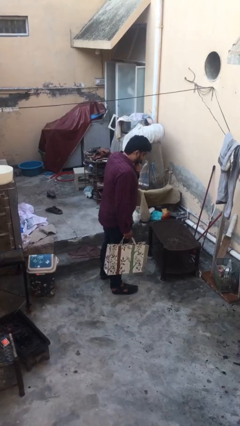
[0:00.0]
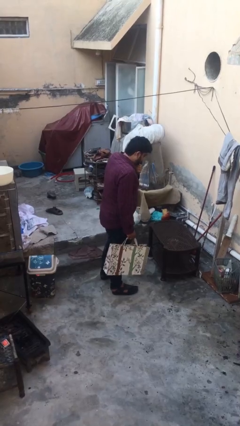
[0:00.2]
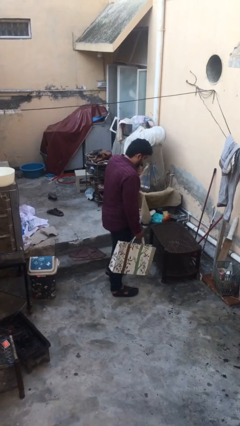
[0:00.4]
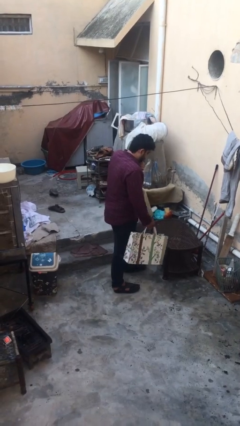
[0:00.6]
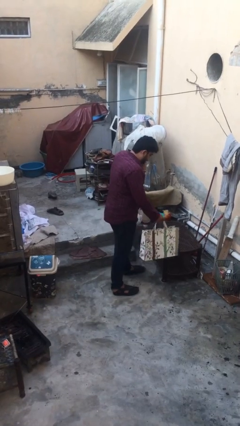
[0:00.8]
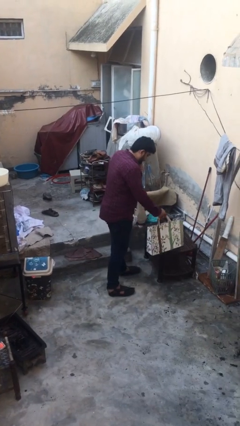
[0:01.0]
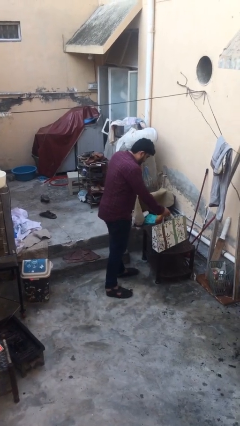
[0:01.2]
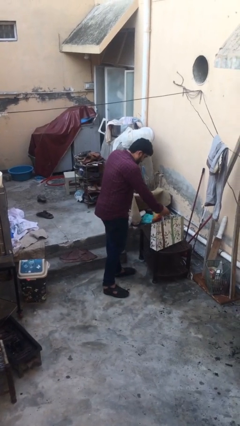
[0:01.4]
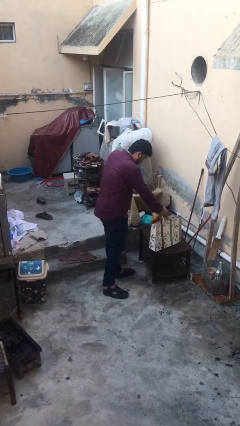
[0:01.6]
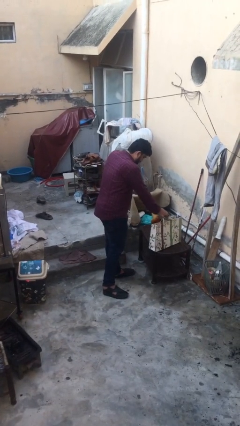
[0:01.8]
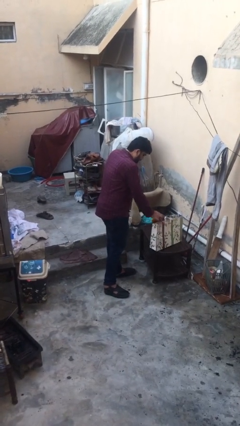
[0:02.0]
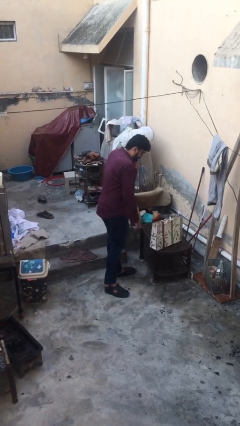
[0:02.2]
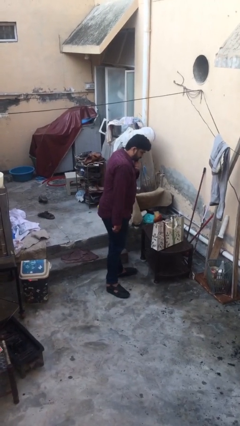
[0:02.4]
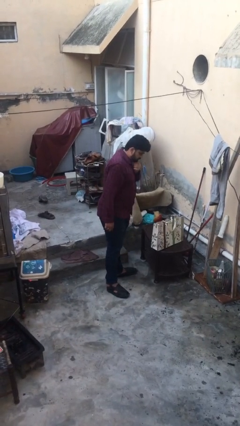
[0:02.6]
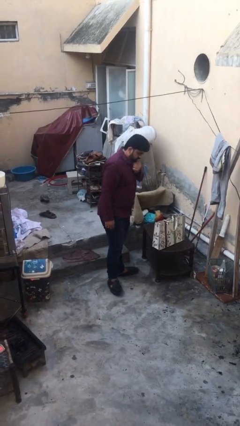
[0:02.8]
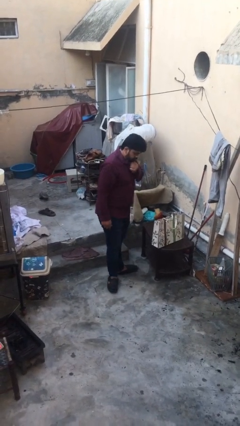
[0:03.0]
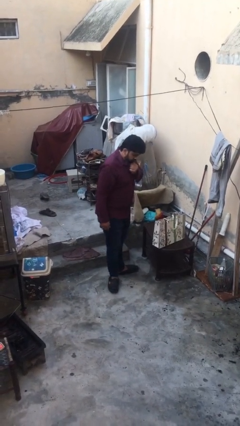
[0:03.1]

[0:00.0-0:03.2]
person puts down object on table

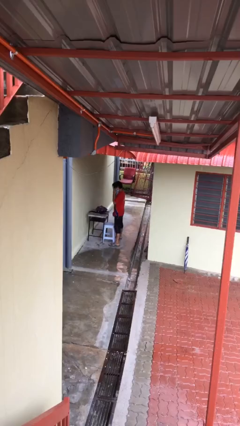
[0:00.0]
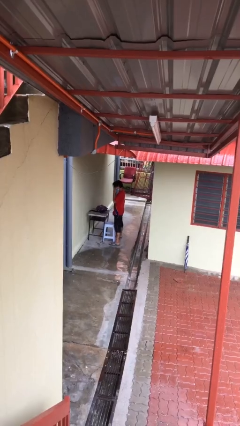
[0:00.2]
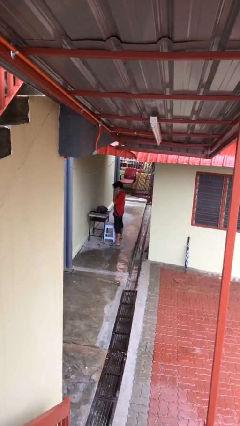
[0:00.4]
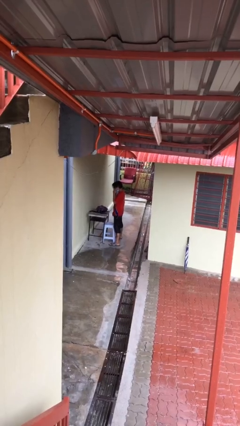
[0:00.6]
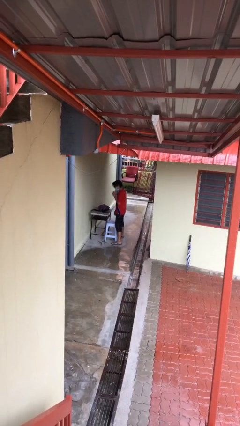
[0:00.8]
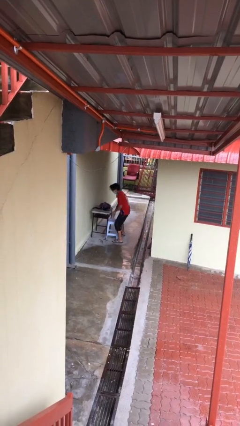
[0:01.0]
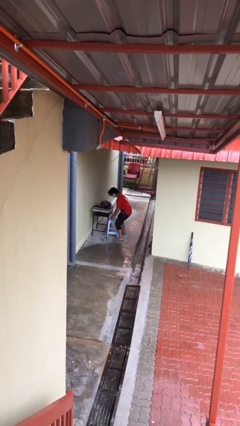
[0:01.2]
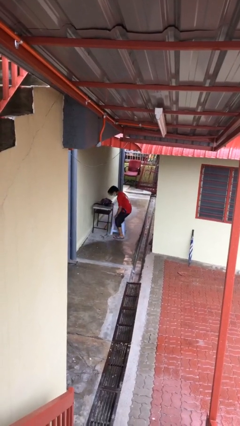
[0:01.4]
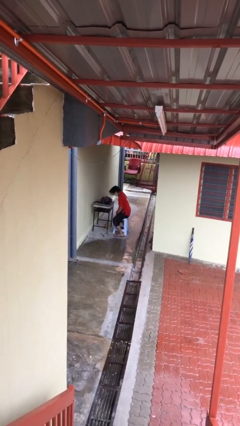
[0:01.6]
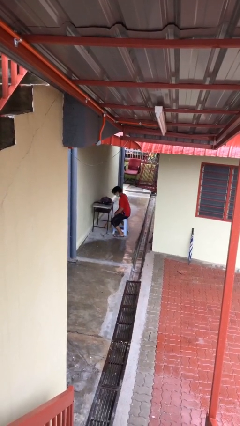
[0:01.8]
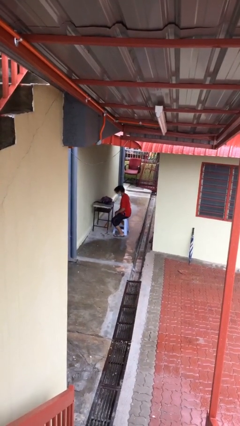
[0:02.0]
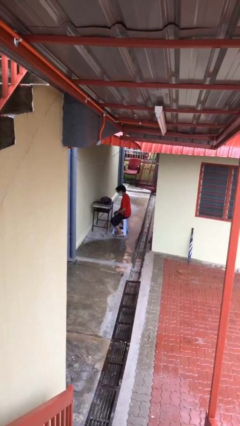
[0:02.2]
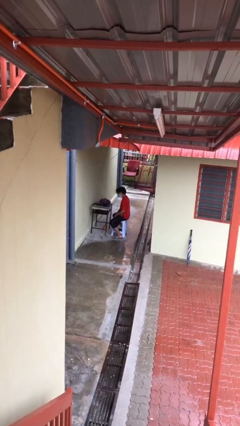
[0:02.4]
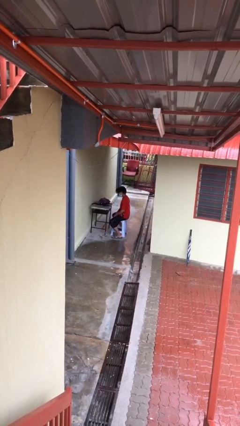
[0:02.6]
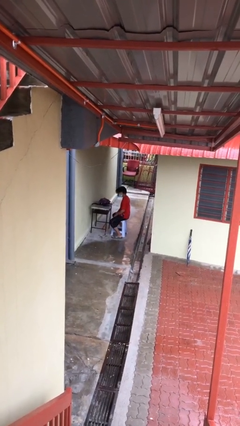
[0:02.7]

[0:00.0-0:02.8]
person sits down

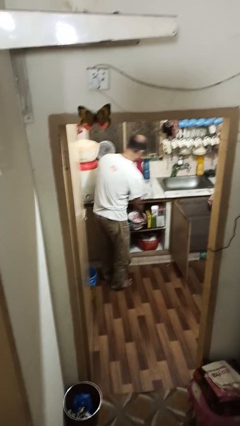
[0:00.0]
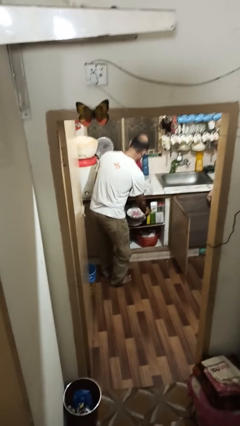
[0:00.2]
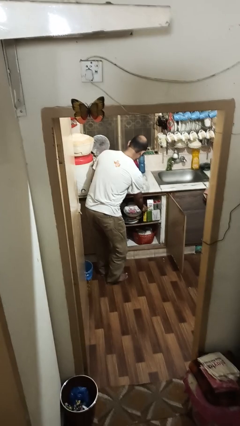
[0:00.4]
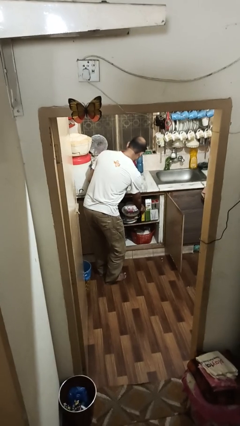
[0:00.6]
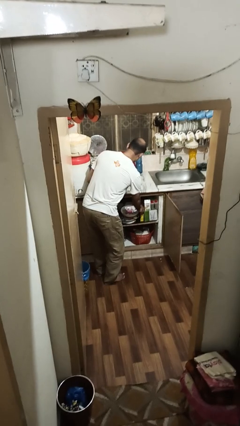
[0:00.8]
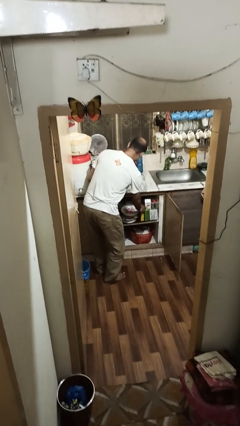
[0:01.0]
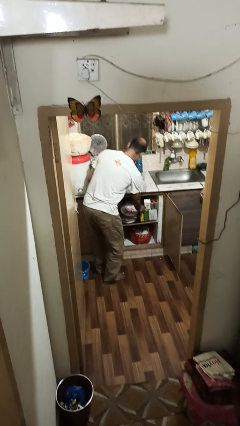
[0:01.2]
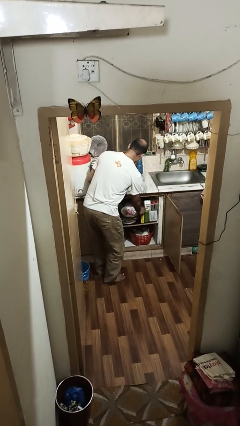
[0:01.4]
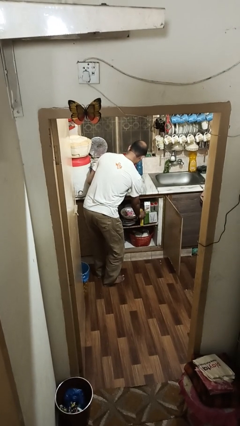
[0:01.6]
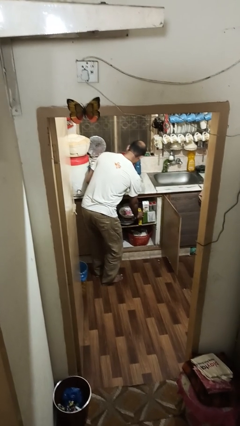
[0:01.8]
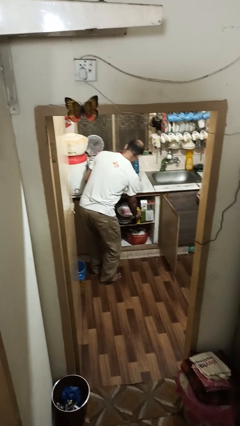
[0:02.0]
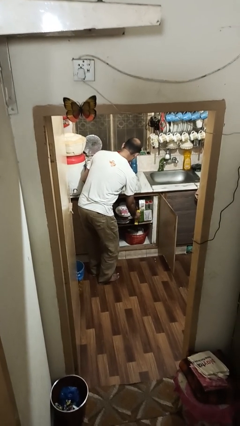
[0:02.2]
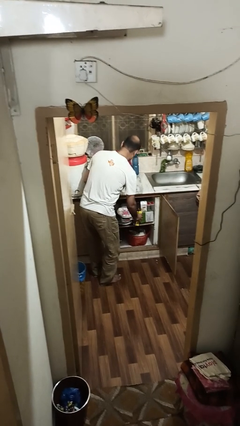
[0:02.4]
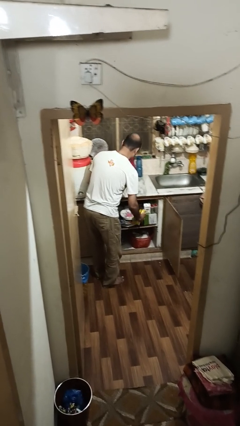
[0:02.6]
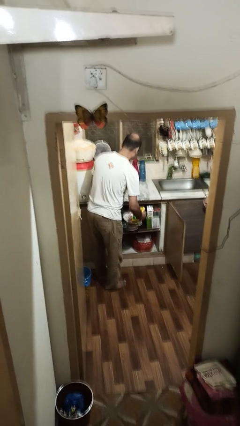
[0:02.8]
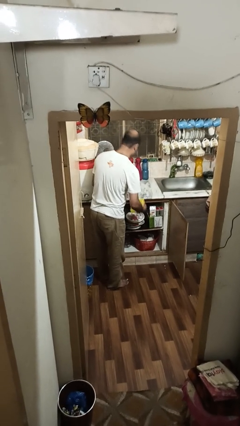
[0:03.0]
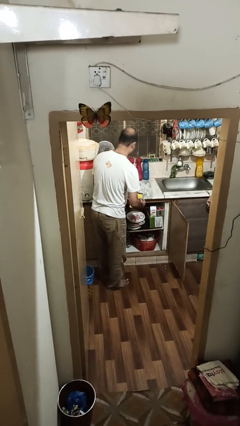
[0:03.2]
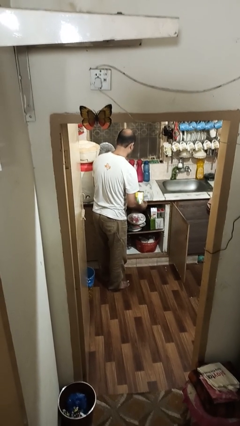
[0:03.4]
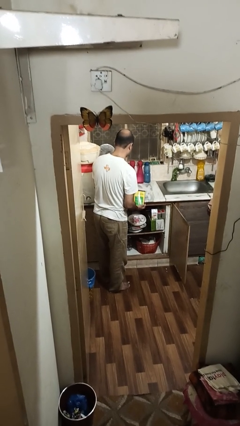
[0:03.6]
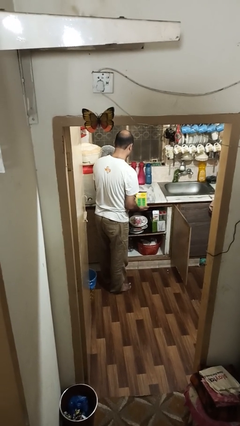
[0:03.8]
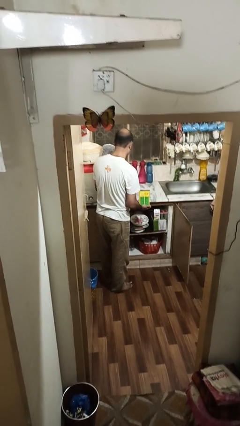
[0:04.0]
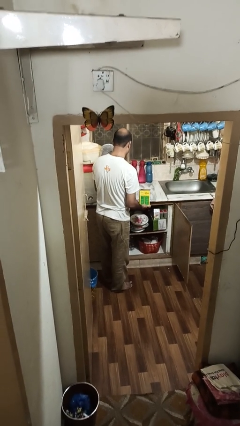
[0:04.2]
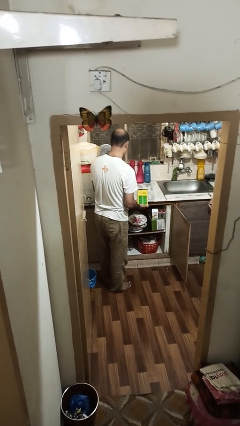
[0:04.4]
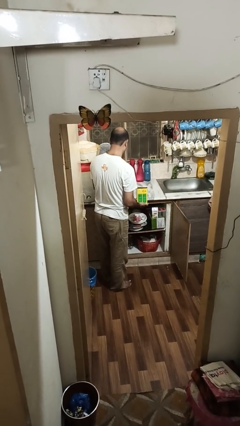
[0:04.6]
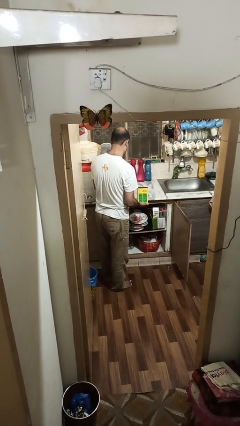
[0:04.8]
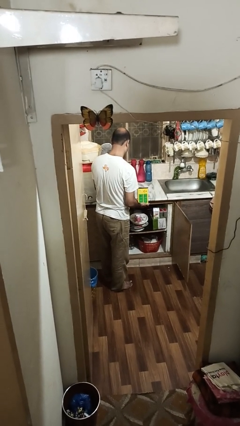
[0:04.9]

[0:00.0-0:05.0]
person takes object from cabinet

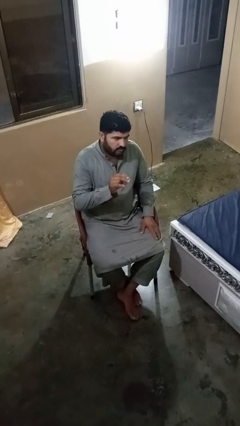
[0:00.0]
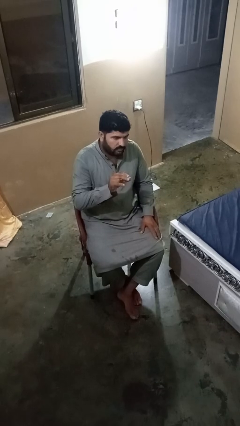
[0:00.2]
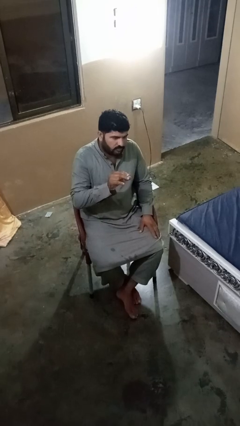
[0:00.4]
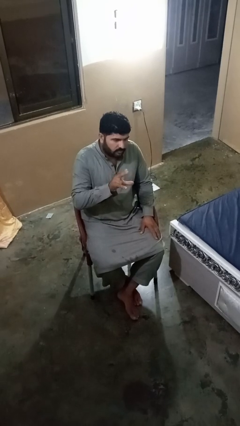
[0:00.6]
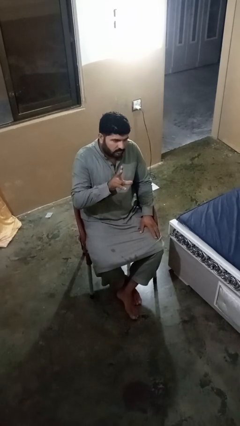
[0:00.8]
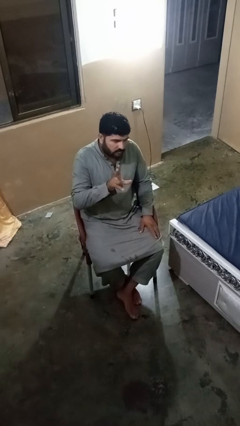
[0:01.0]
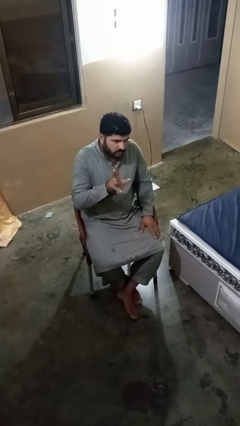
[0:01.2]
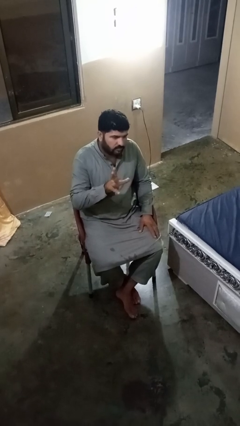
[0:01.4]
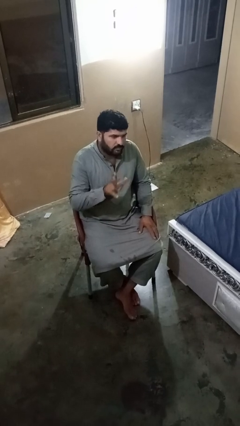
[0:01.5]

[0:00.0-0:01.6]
person gestures zoom out

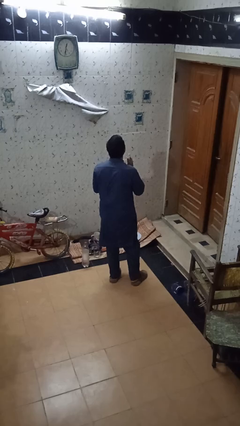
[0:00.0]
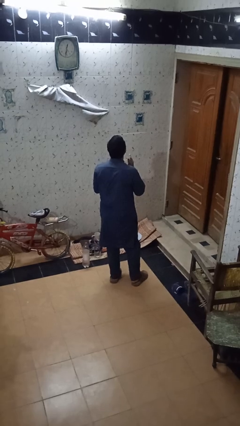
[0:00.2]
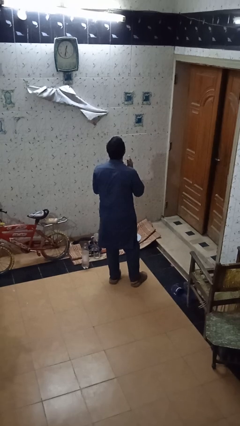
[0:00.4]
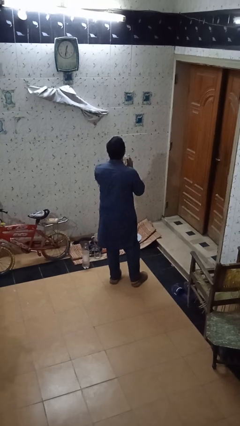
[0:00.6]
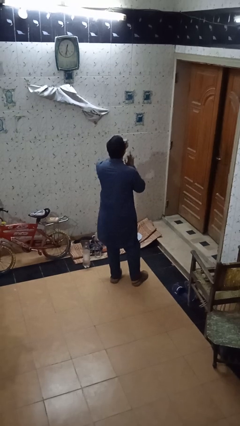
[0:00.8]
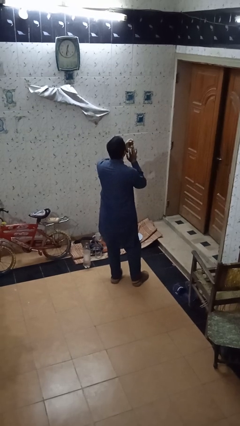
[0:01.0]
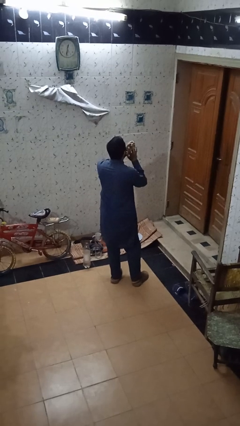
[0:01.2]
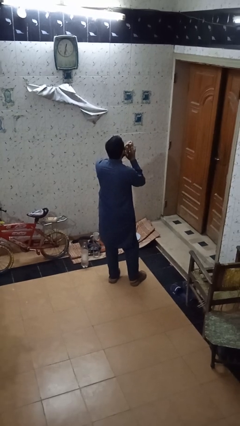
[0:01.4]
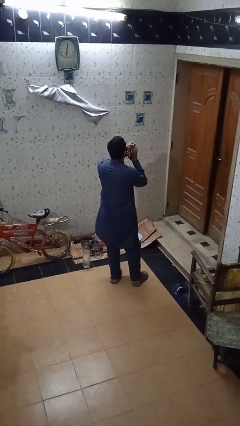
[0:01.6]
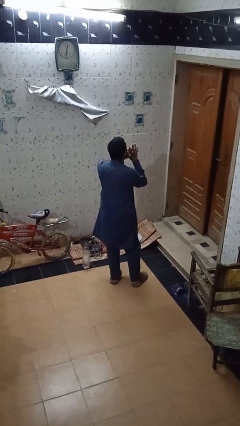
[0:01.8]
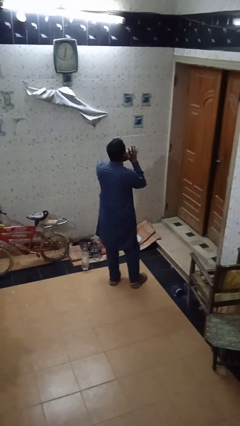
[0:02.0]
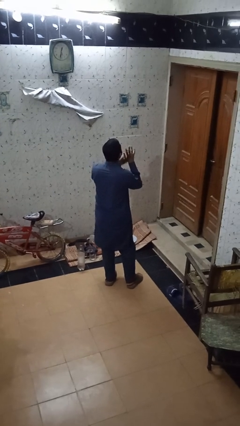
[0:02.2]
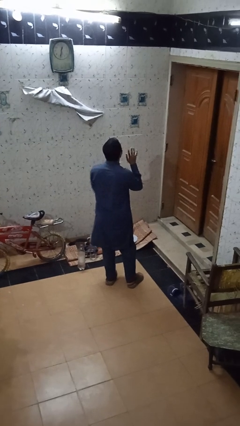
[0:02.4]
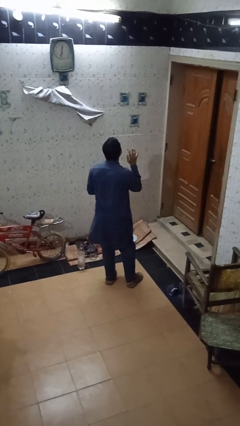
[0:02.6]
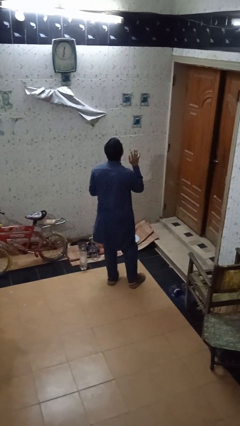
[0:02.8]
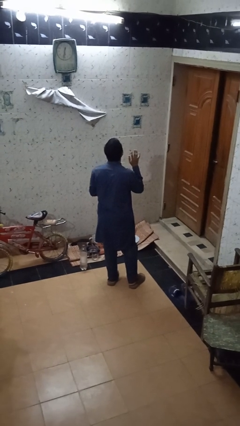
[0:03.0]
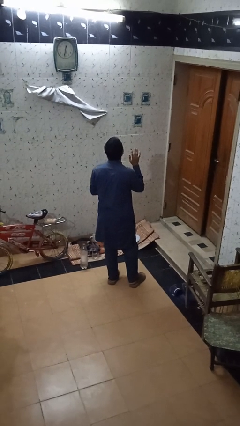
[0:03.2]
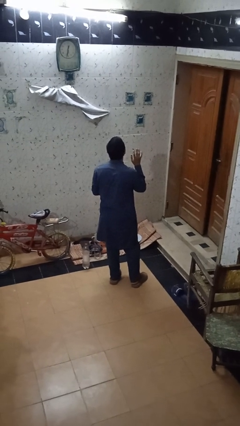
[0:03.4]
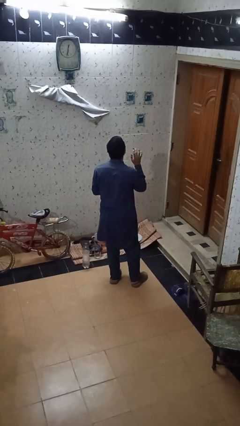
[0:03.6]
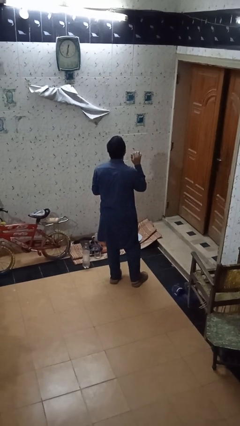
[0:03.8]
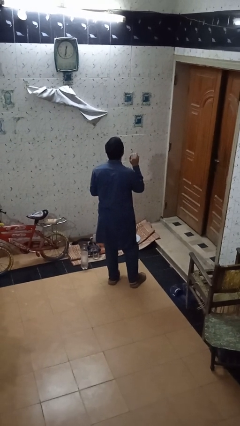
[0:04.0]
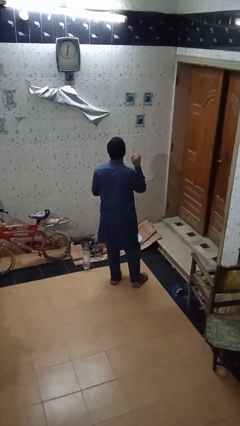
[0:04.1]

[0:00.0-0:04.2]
person puts on ring

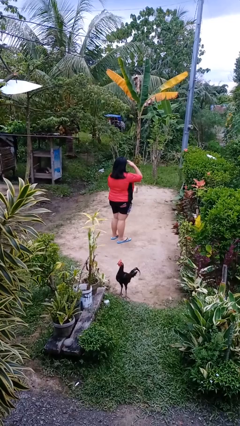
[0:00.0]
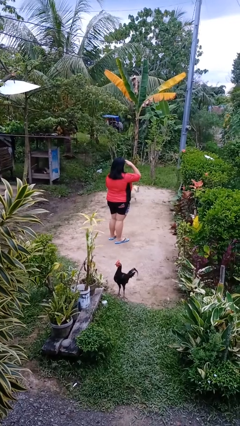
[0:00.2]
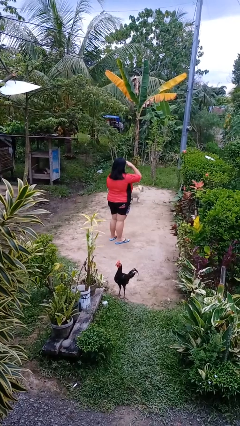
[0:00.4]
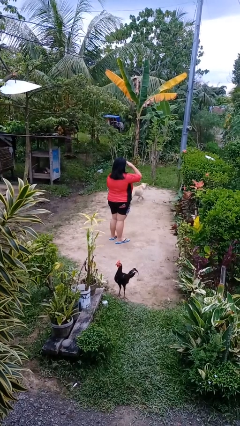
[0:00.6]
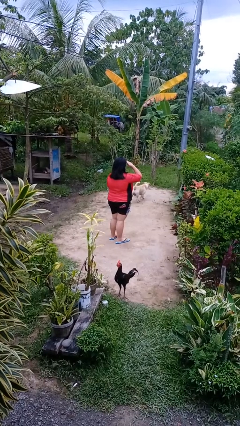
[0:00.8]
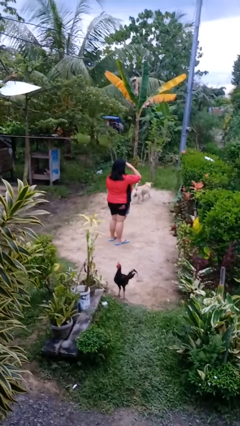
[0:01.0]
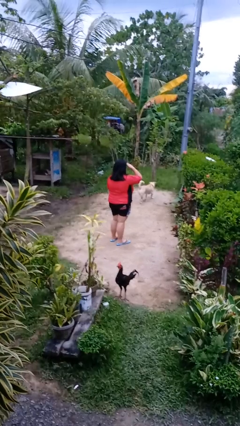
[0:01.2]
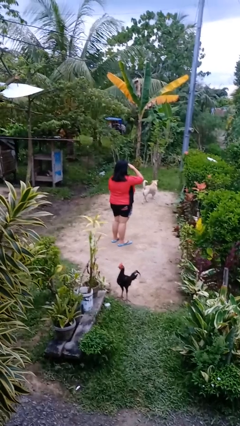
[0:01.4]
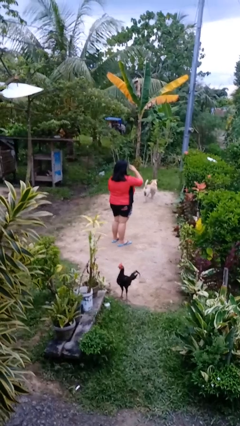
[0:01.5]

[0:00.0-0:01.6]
person shades eyes
